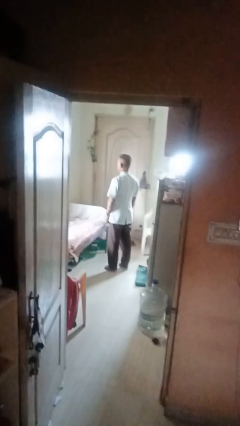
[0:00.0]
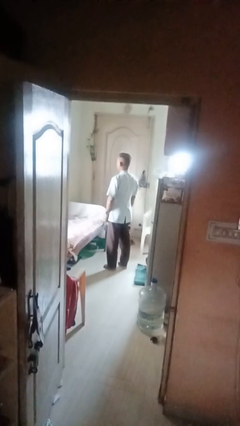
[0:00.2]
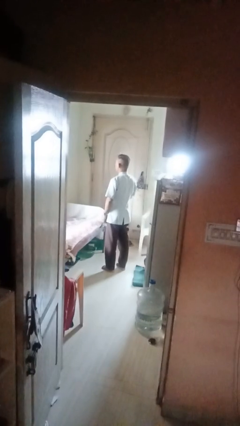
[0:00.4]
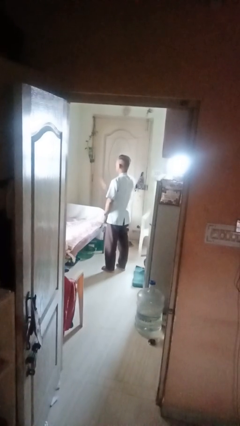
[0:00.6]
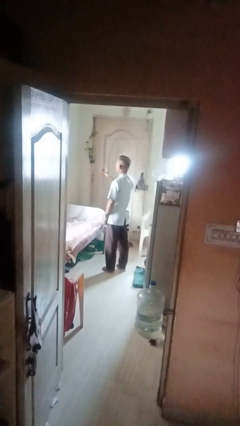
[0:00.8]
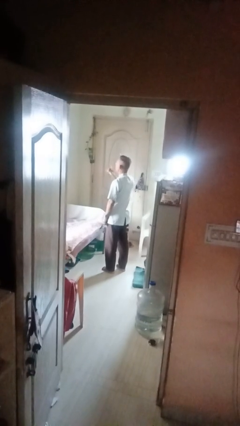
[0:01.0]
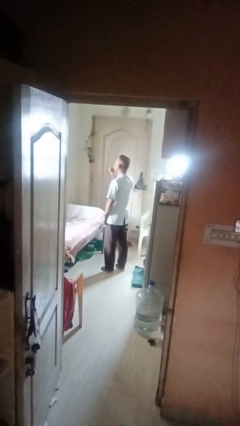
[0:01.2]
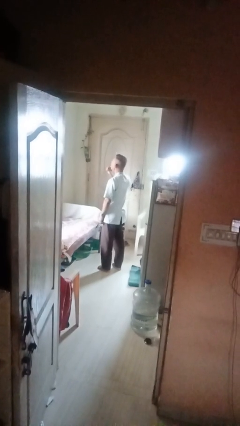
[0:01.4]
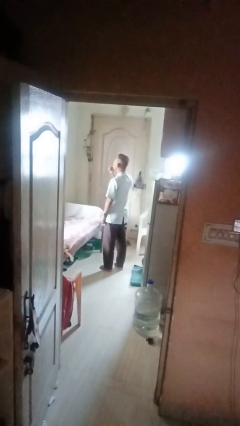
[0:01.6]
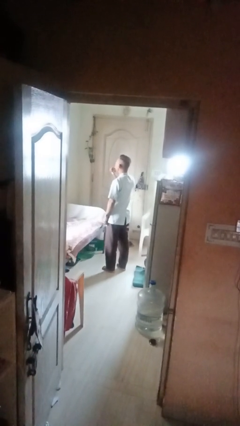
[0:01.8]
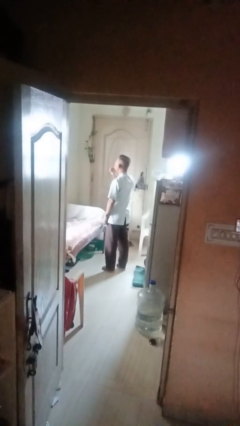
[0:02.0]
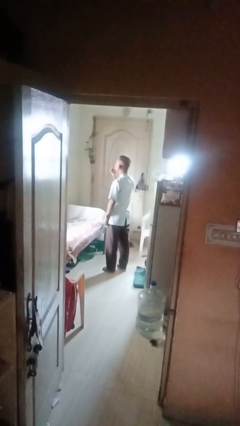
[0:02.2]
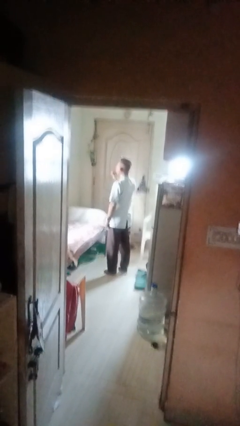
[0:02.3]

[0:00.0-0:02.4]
person gestures be quiet

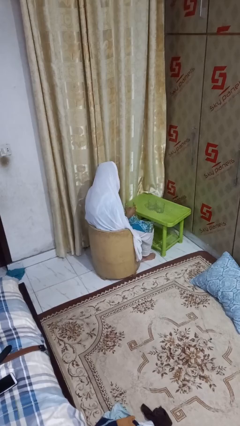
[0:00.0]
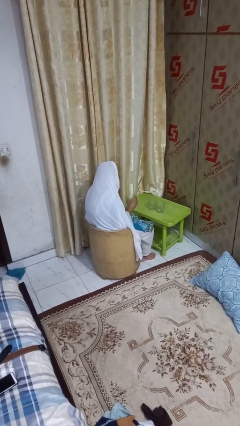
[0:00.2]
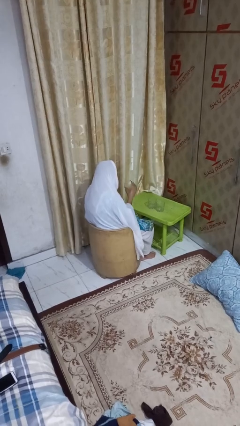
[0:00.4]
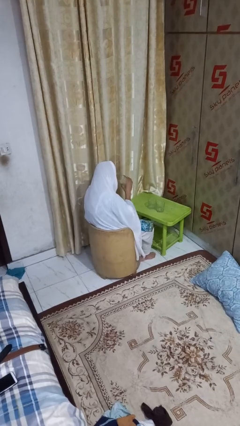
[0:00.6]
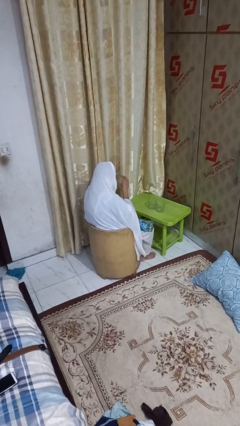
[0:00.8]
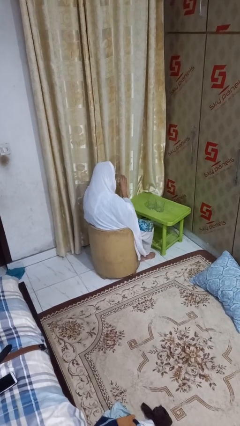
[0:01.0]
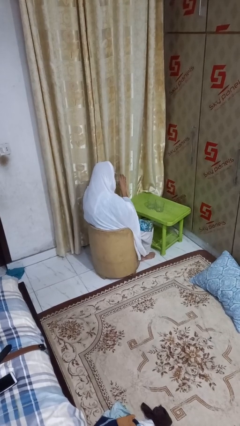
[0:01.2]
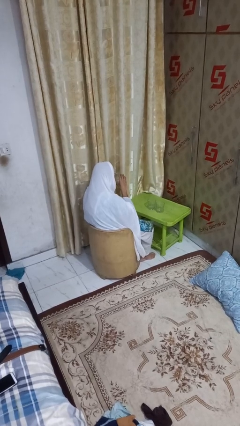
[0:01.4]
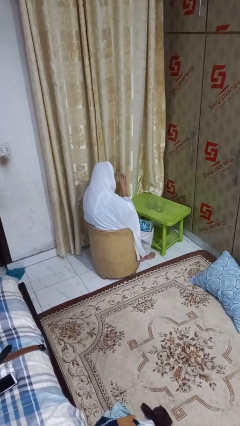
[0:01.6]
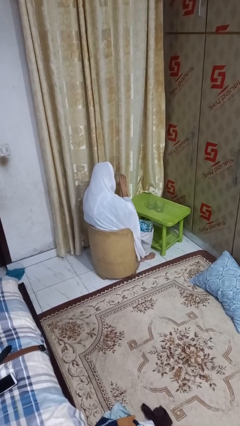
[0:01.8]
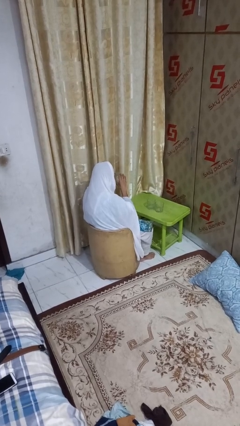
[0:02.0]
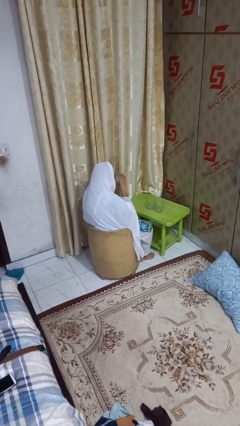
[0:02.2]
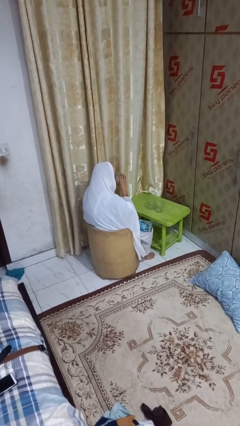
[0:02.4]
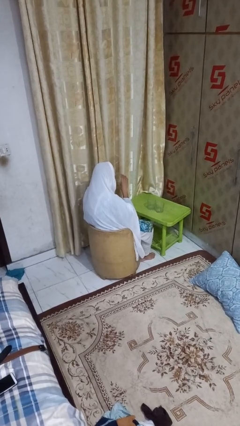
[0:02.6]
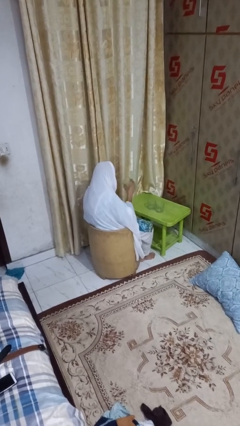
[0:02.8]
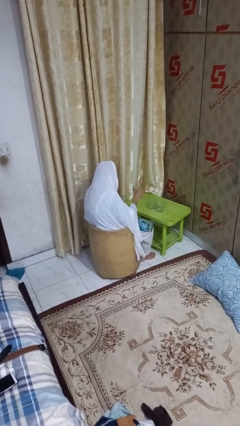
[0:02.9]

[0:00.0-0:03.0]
person drinks from shotglass

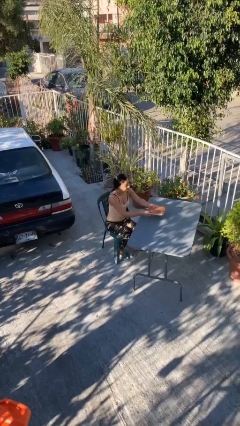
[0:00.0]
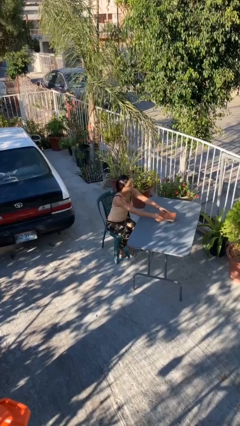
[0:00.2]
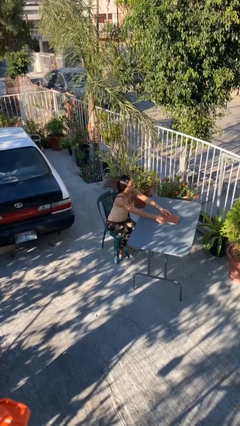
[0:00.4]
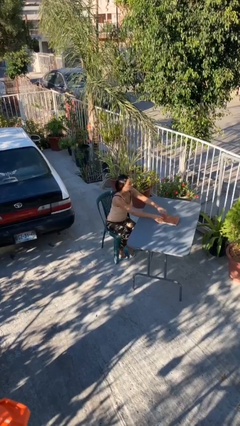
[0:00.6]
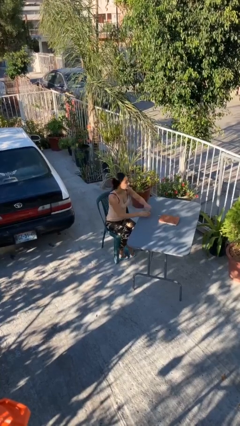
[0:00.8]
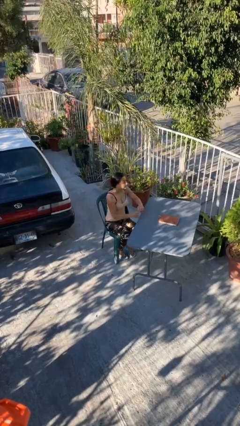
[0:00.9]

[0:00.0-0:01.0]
person puts down object on table

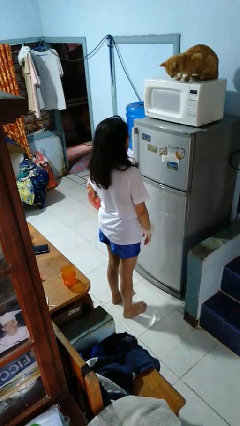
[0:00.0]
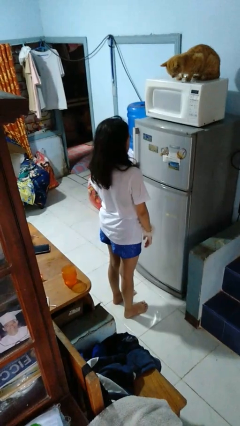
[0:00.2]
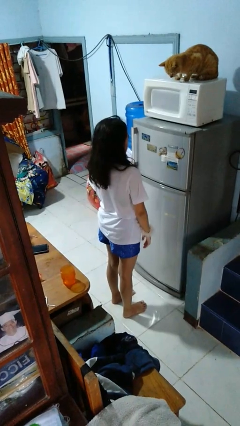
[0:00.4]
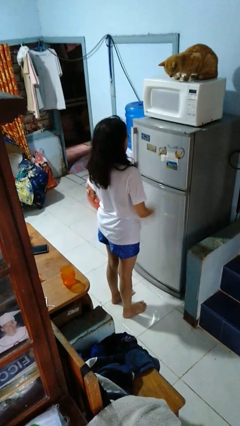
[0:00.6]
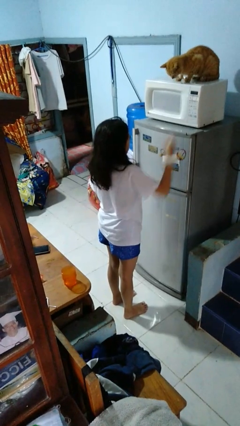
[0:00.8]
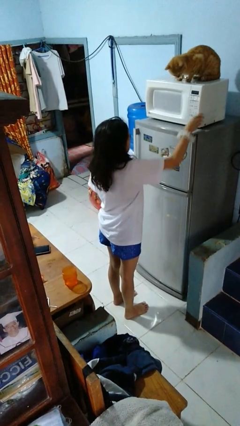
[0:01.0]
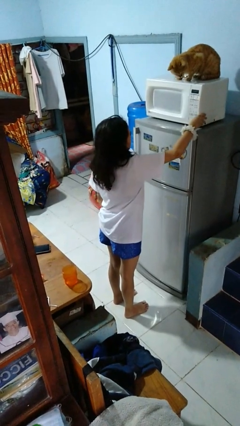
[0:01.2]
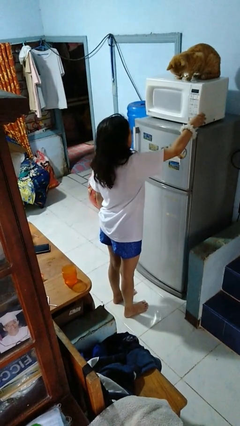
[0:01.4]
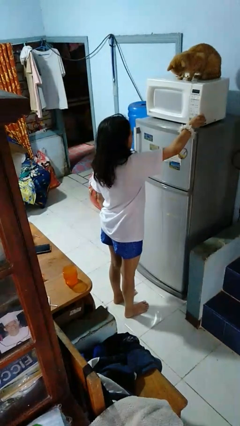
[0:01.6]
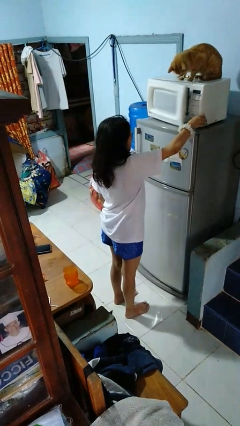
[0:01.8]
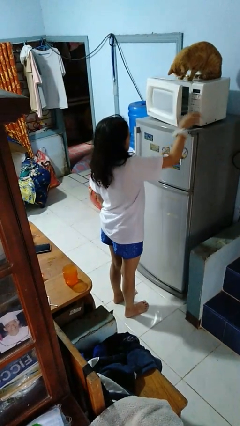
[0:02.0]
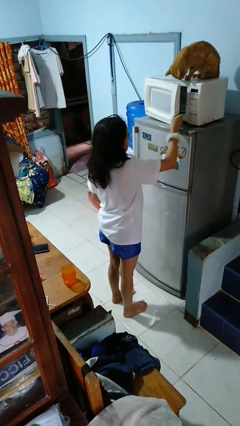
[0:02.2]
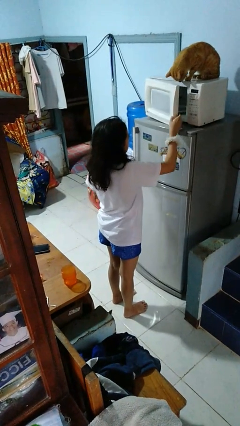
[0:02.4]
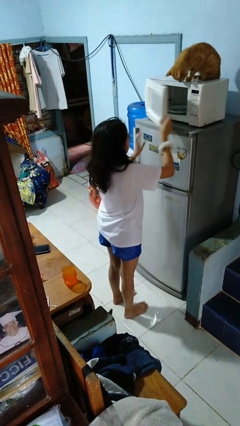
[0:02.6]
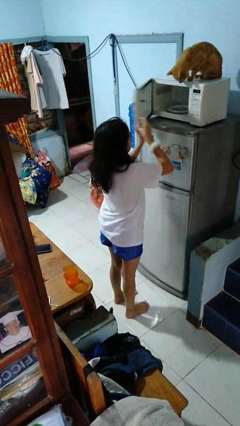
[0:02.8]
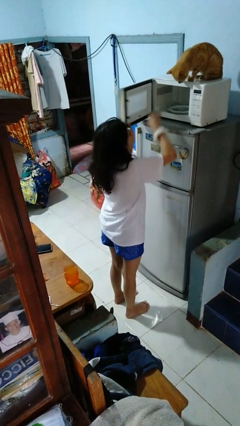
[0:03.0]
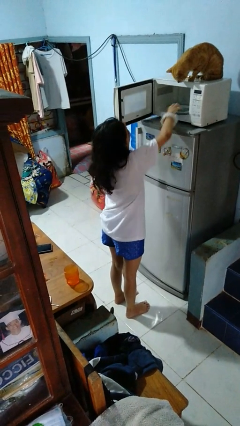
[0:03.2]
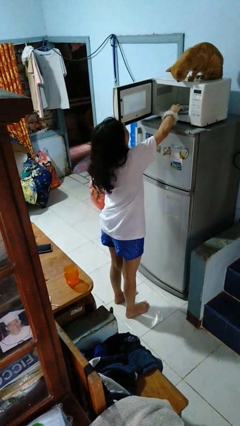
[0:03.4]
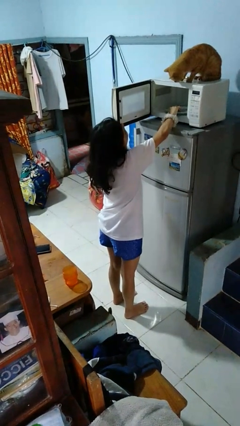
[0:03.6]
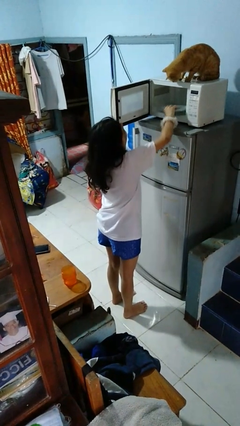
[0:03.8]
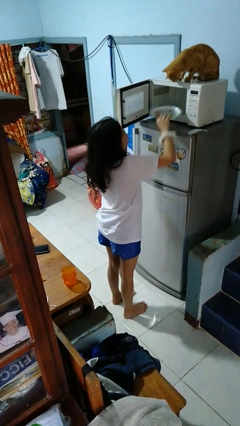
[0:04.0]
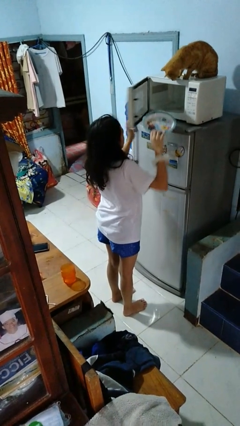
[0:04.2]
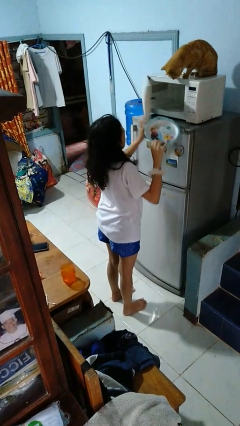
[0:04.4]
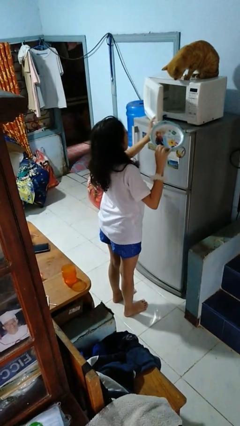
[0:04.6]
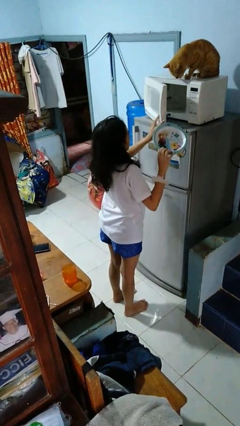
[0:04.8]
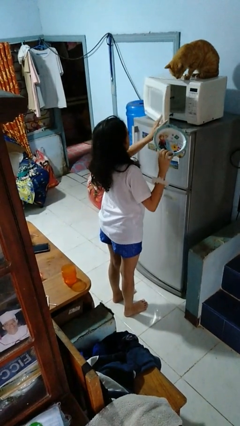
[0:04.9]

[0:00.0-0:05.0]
person takes object from microwave

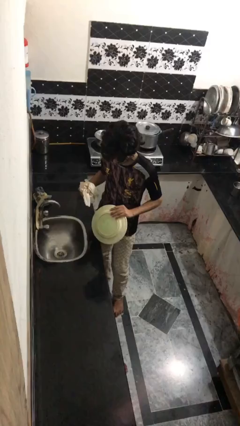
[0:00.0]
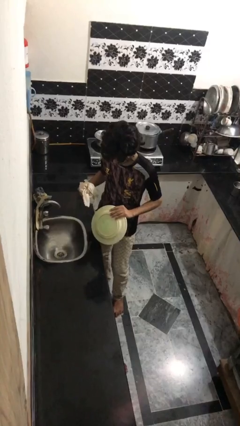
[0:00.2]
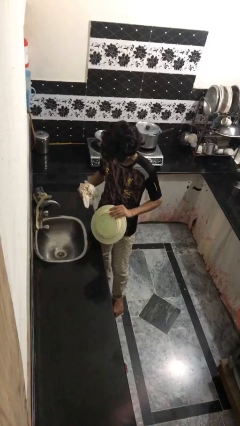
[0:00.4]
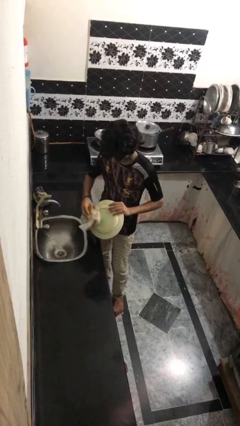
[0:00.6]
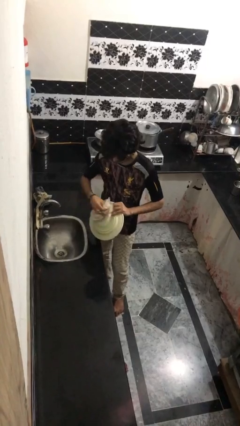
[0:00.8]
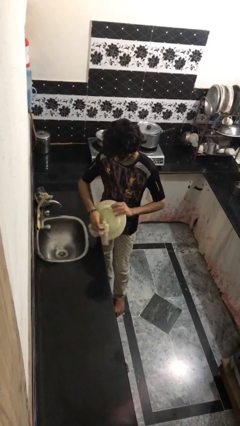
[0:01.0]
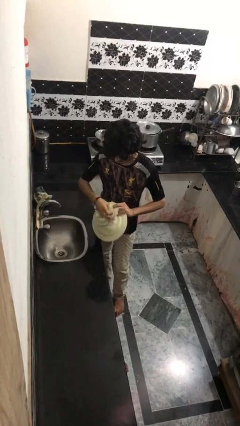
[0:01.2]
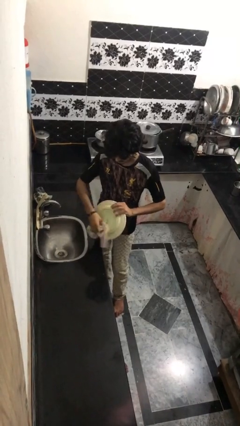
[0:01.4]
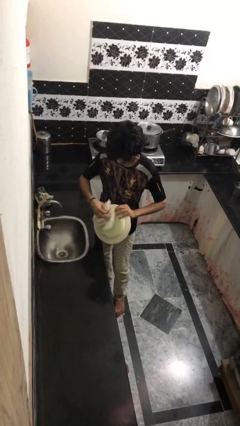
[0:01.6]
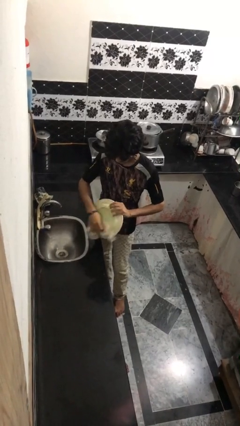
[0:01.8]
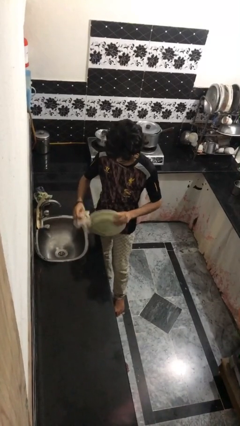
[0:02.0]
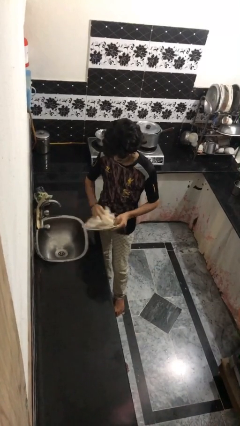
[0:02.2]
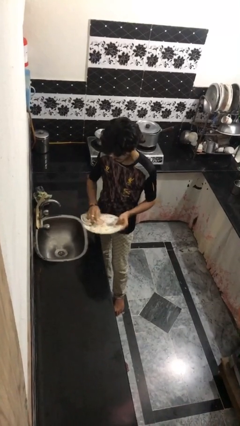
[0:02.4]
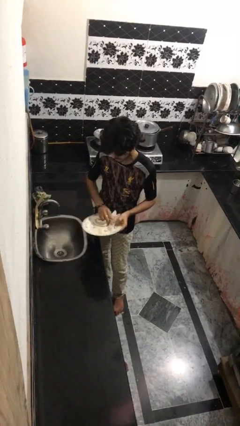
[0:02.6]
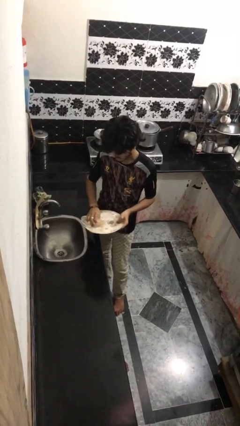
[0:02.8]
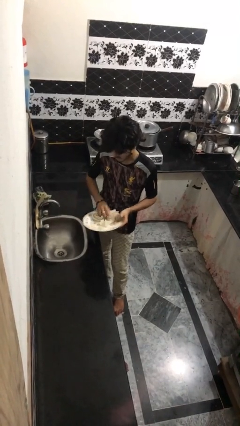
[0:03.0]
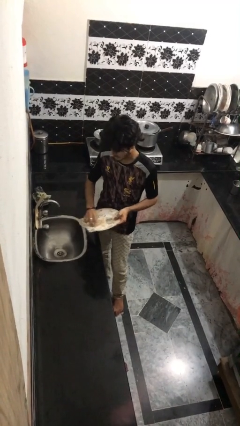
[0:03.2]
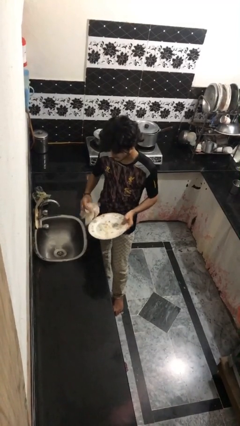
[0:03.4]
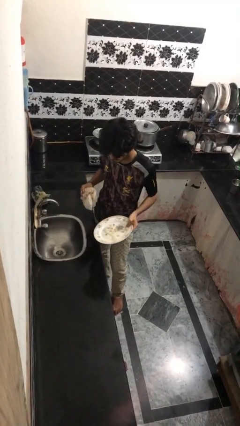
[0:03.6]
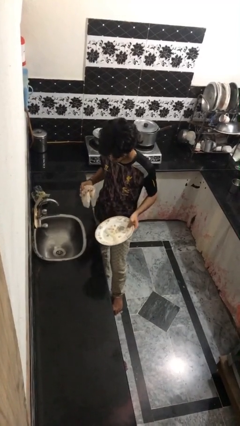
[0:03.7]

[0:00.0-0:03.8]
person dries dish

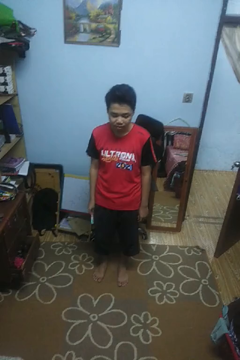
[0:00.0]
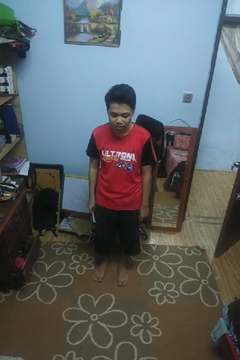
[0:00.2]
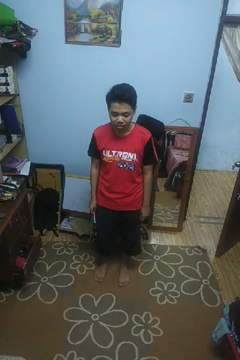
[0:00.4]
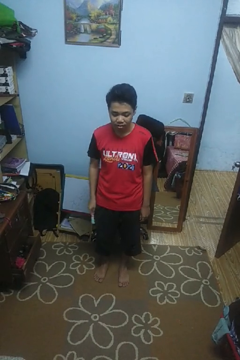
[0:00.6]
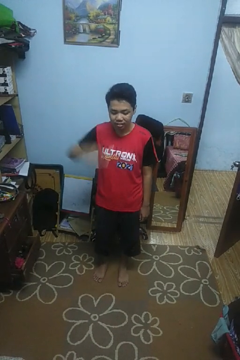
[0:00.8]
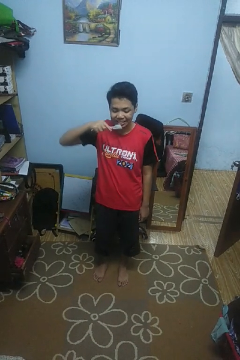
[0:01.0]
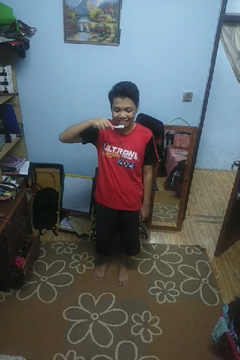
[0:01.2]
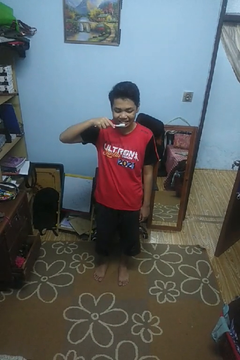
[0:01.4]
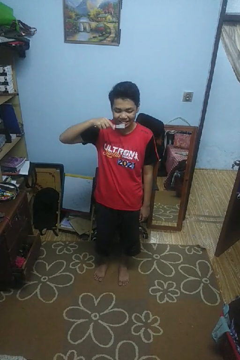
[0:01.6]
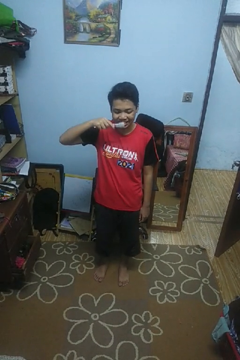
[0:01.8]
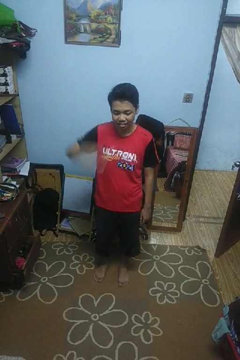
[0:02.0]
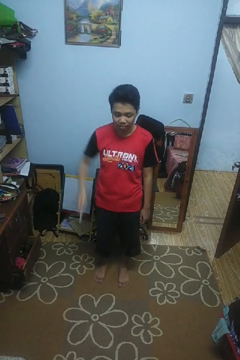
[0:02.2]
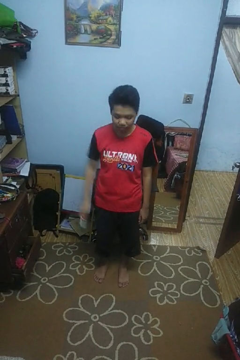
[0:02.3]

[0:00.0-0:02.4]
person brushes teeth
